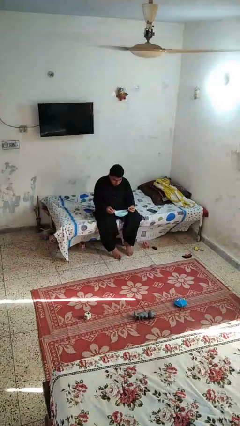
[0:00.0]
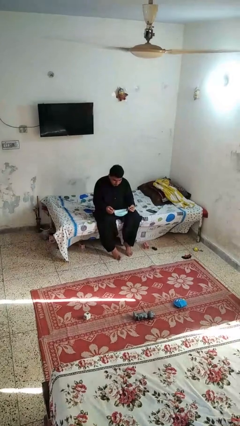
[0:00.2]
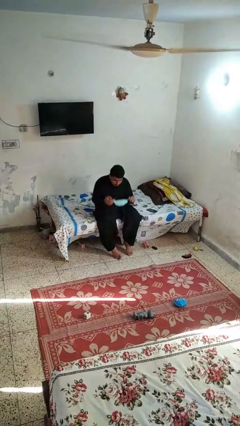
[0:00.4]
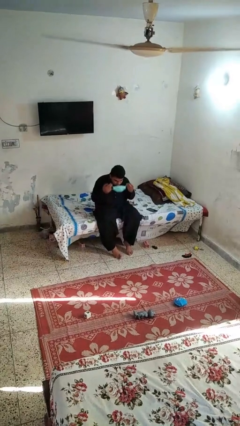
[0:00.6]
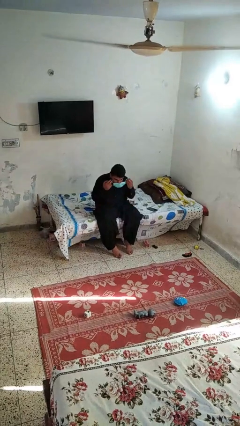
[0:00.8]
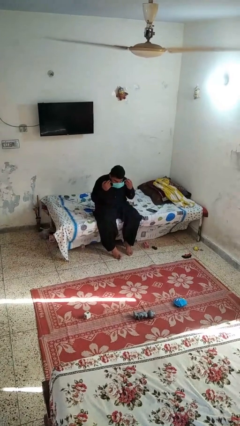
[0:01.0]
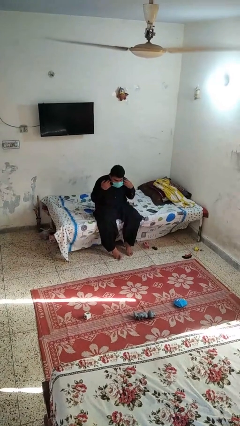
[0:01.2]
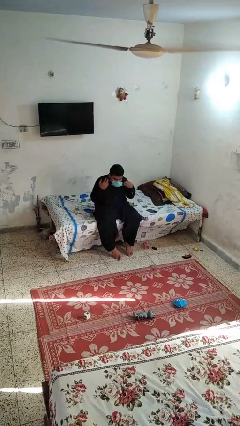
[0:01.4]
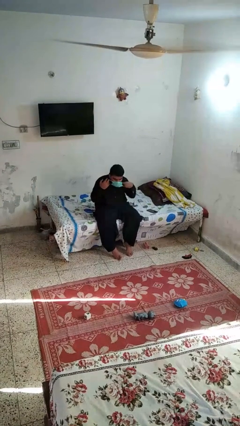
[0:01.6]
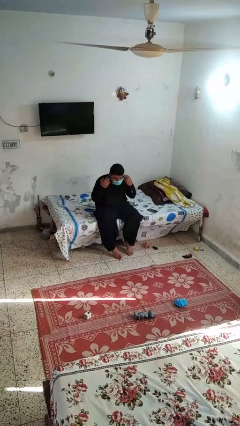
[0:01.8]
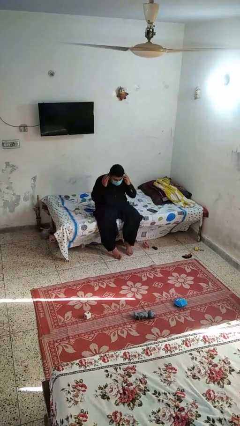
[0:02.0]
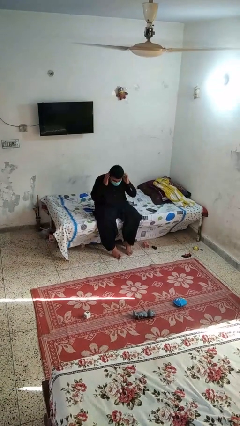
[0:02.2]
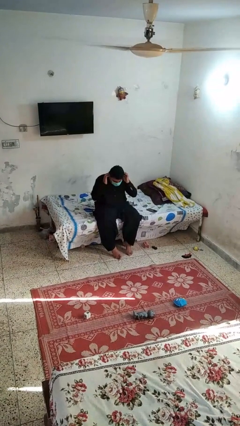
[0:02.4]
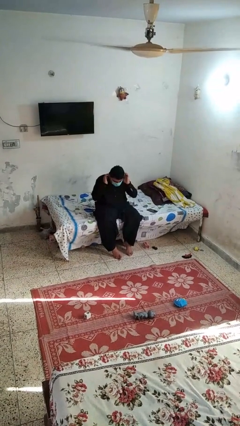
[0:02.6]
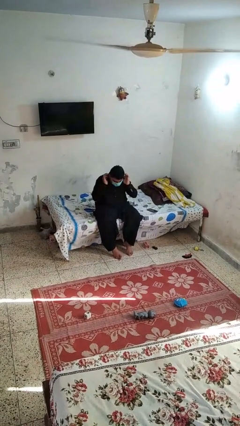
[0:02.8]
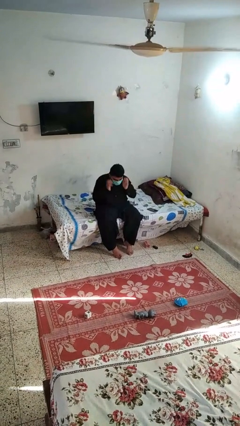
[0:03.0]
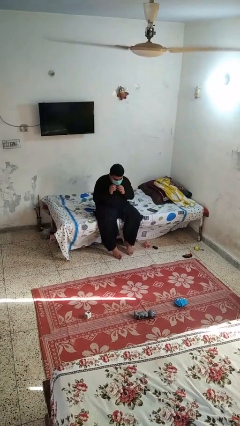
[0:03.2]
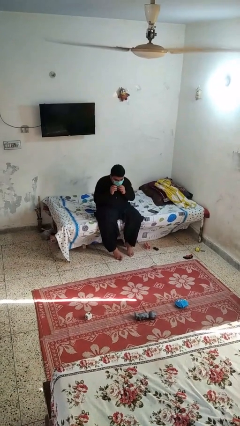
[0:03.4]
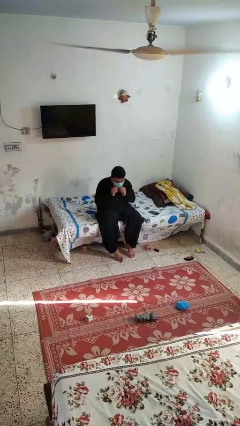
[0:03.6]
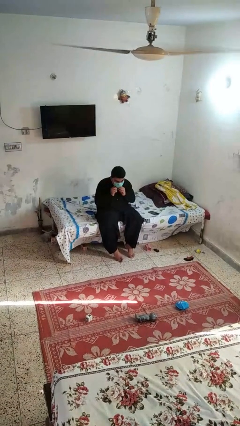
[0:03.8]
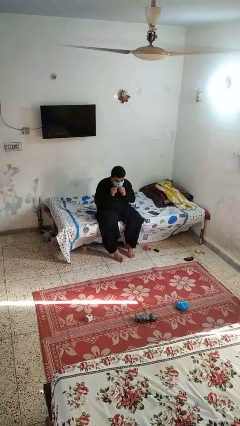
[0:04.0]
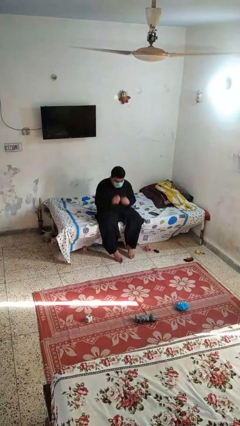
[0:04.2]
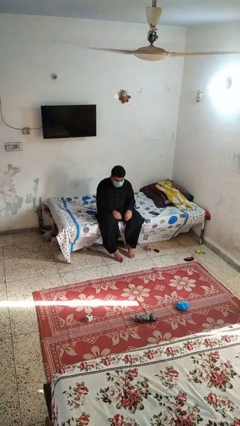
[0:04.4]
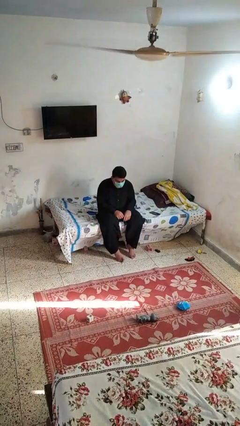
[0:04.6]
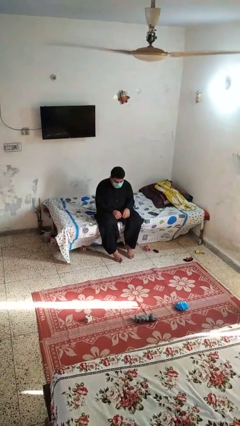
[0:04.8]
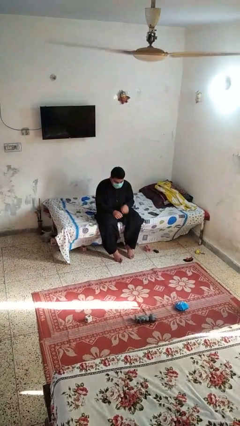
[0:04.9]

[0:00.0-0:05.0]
person puts on facemask

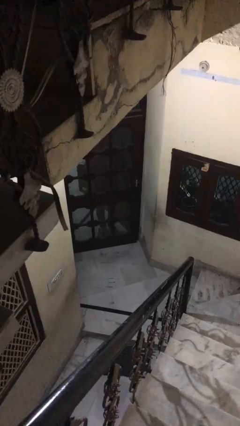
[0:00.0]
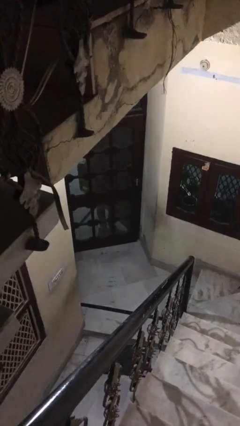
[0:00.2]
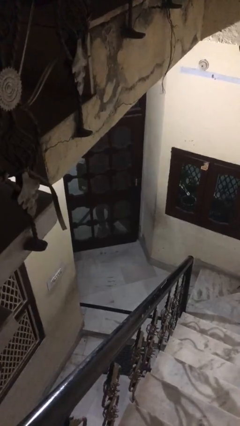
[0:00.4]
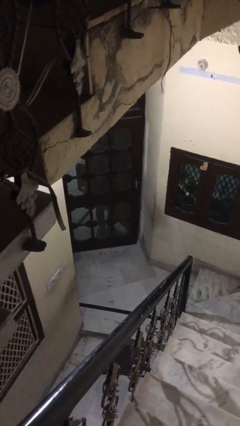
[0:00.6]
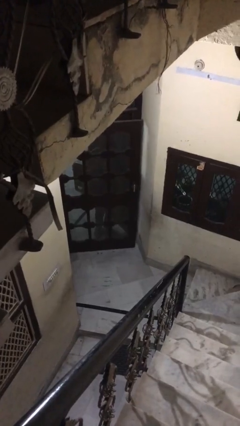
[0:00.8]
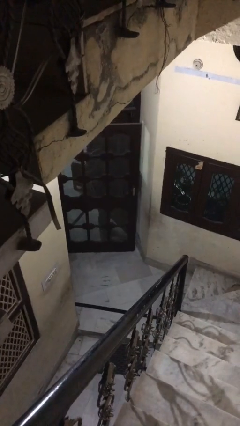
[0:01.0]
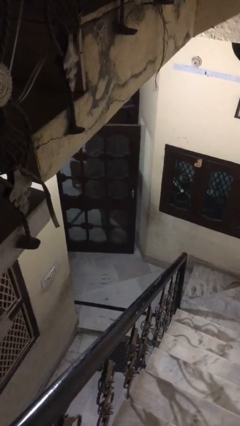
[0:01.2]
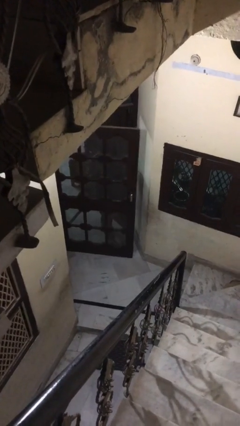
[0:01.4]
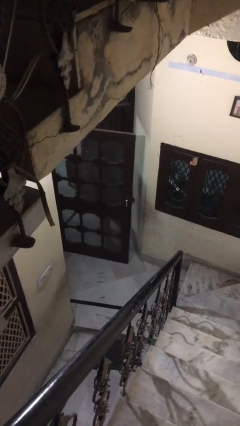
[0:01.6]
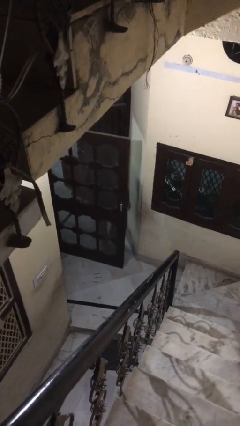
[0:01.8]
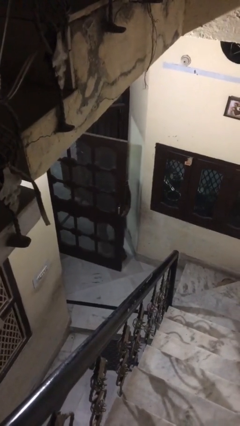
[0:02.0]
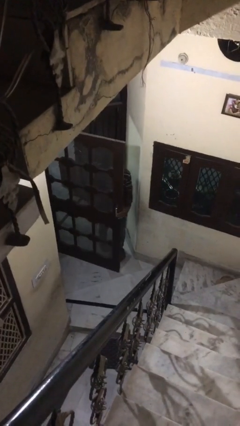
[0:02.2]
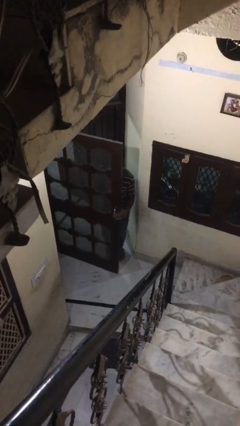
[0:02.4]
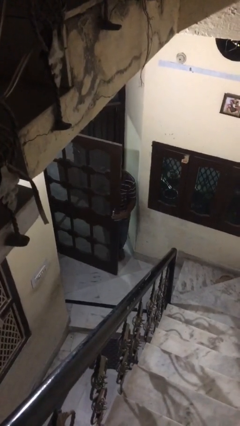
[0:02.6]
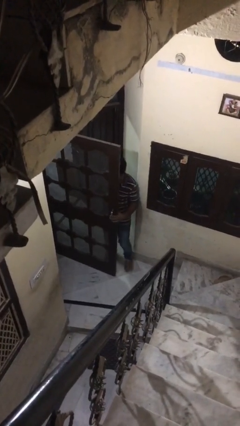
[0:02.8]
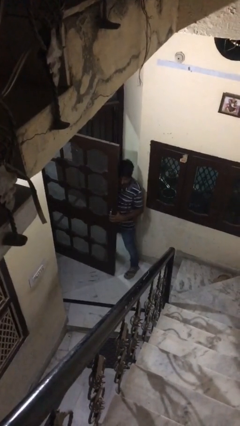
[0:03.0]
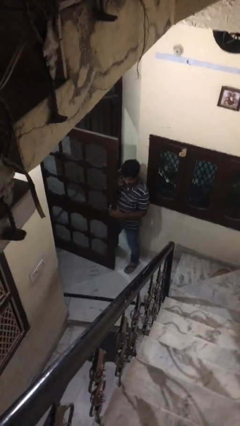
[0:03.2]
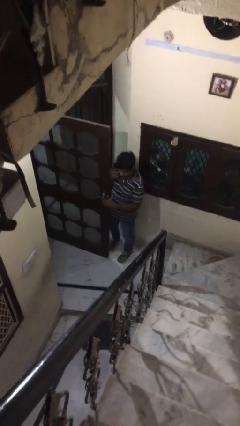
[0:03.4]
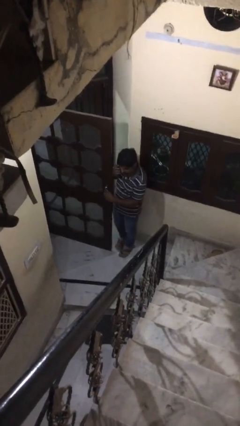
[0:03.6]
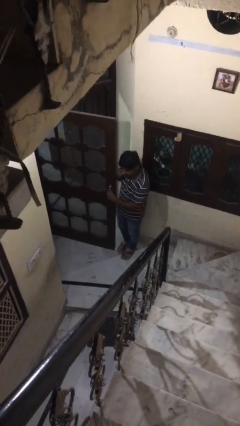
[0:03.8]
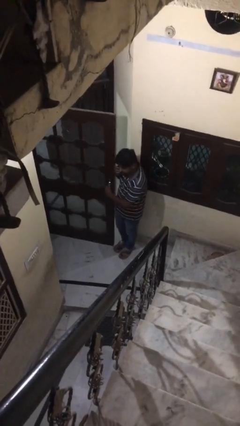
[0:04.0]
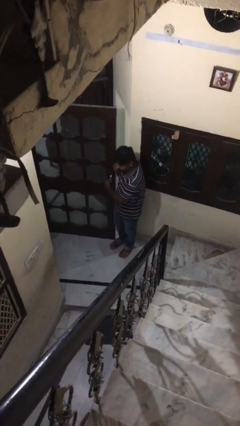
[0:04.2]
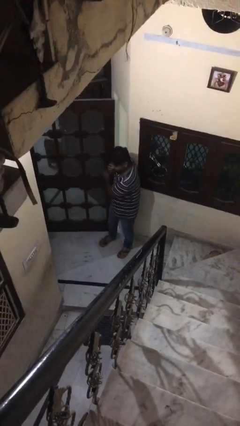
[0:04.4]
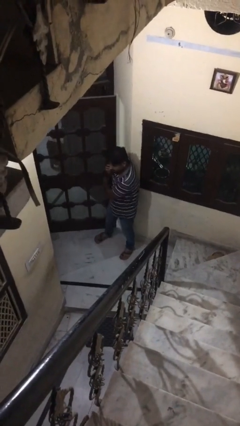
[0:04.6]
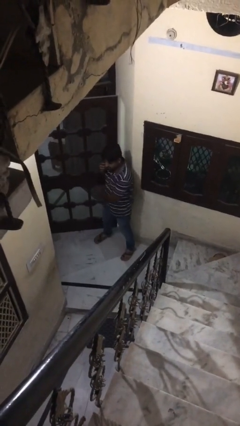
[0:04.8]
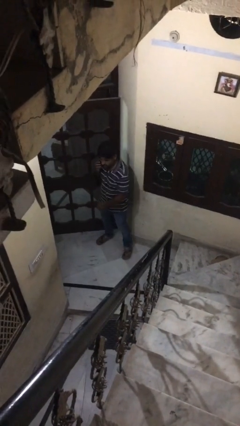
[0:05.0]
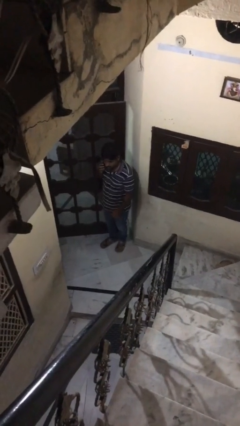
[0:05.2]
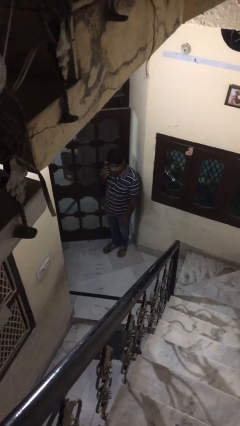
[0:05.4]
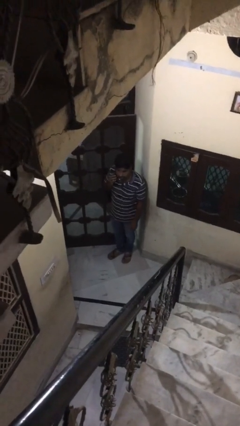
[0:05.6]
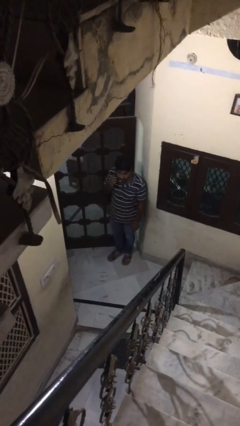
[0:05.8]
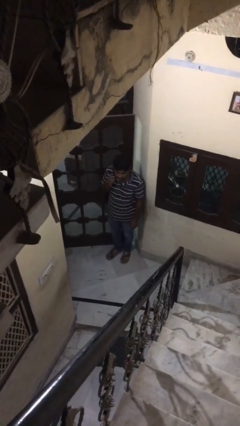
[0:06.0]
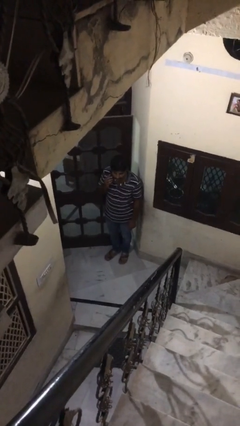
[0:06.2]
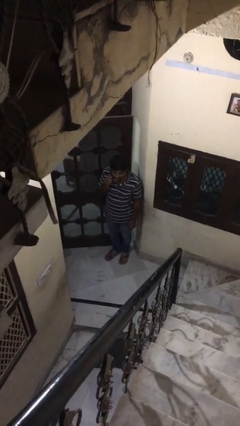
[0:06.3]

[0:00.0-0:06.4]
person exits scene through structure

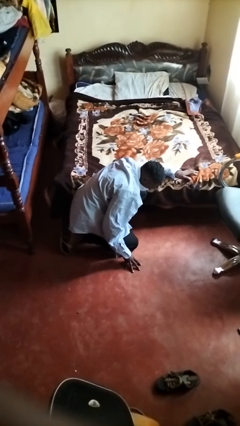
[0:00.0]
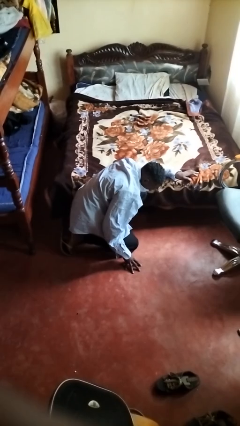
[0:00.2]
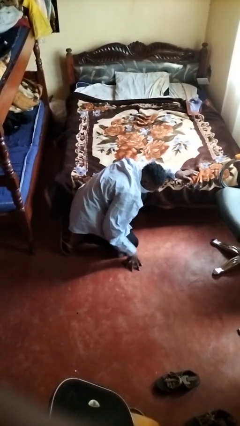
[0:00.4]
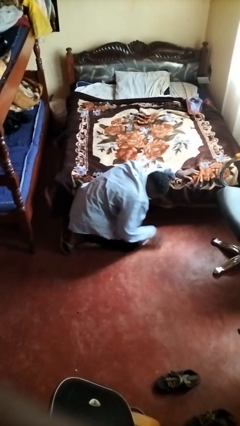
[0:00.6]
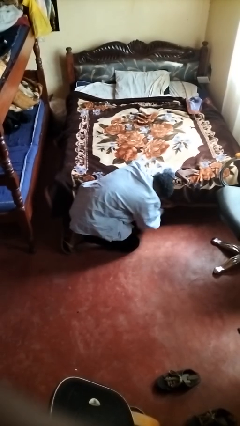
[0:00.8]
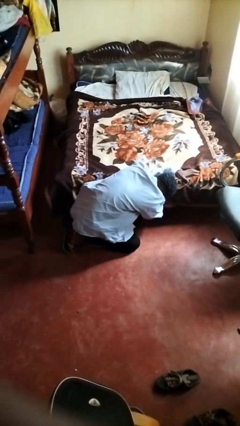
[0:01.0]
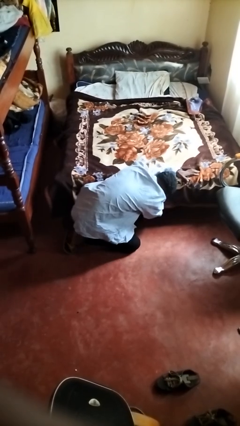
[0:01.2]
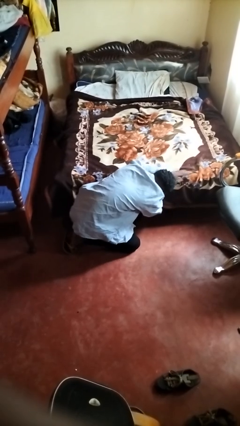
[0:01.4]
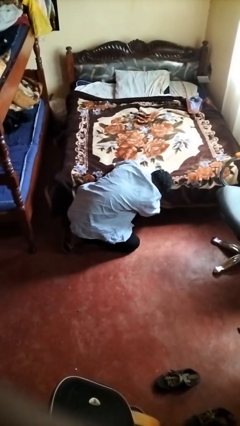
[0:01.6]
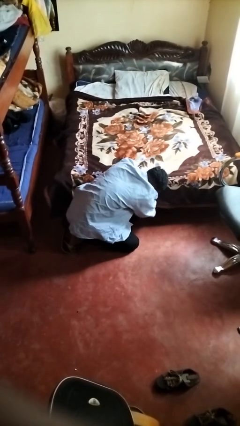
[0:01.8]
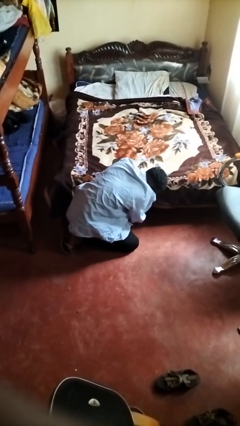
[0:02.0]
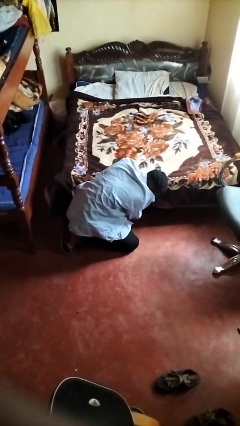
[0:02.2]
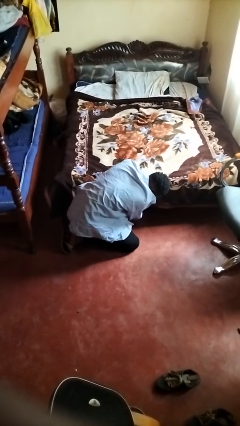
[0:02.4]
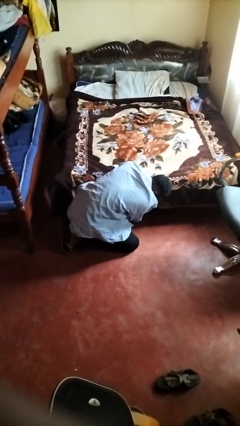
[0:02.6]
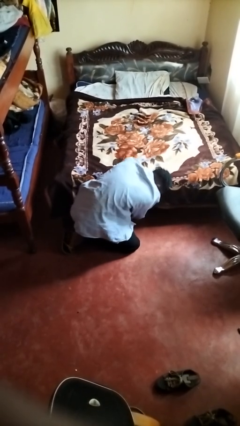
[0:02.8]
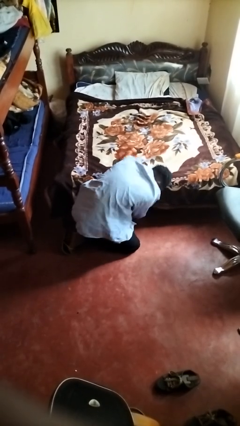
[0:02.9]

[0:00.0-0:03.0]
person searches under bed

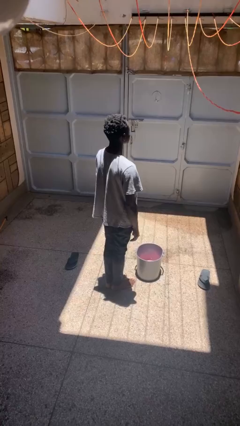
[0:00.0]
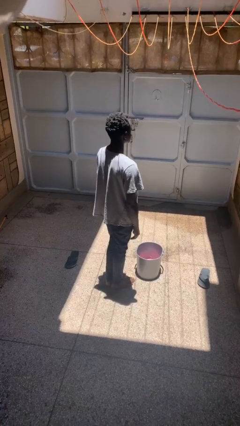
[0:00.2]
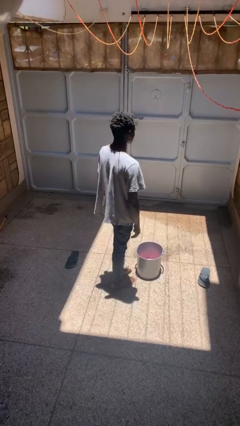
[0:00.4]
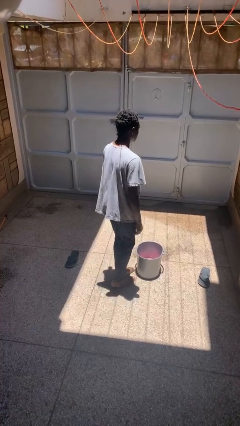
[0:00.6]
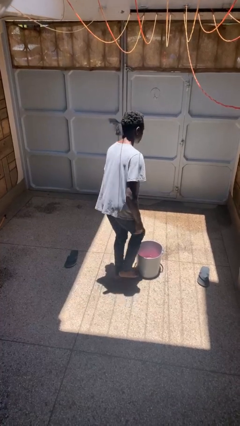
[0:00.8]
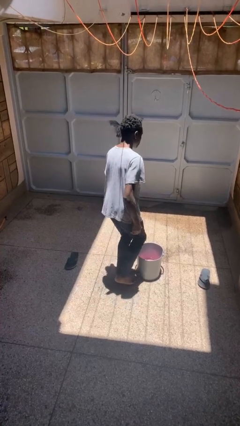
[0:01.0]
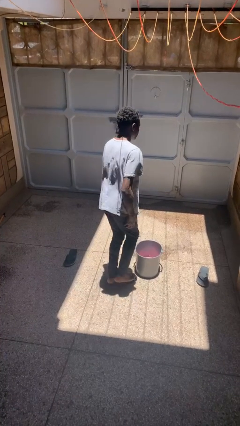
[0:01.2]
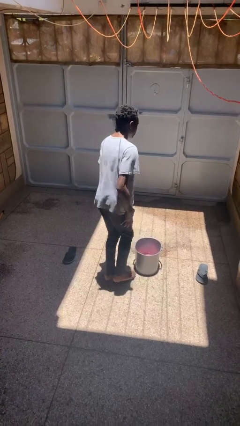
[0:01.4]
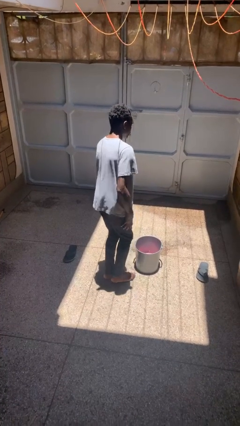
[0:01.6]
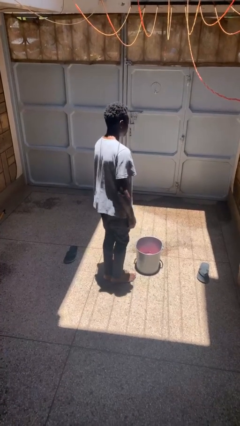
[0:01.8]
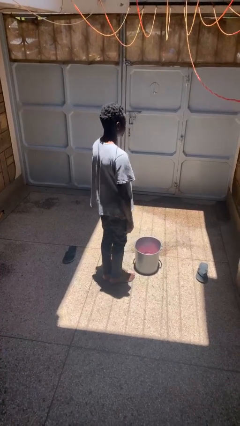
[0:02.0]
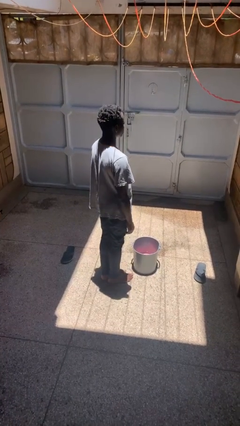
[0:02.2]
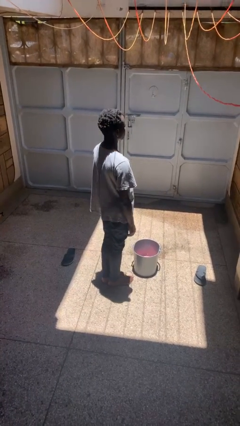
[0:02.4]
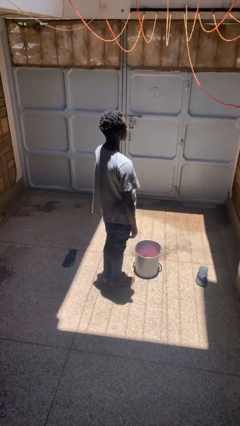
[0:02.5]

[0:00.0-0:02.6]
person stubs toe

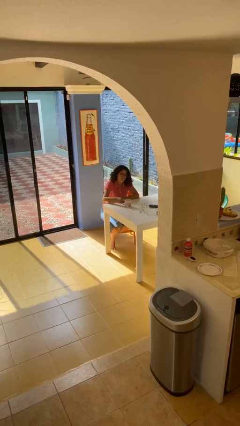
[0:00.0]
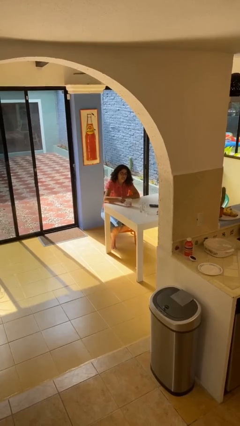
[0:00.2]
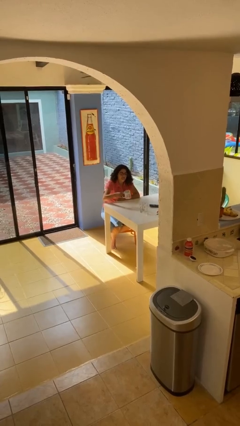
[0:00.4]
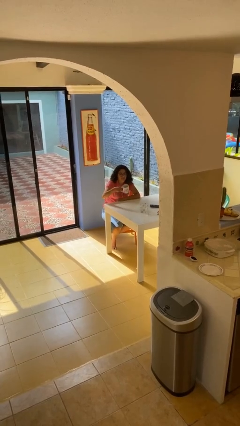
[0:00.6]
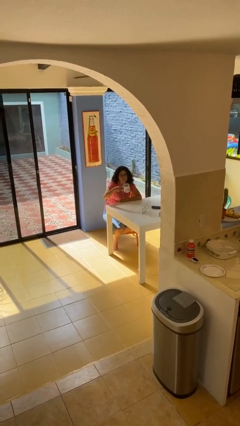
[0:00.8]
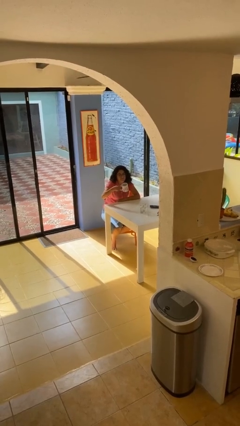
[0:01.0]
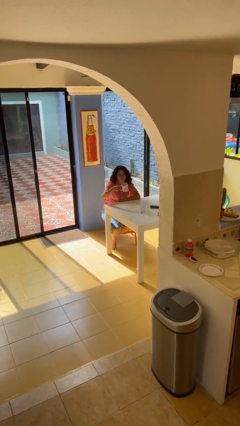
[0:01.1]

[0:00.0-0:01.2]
person picks up object from table
